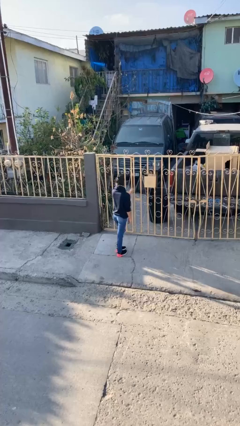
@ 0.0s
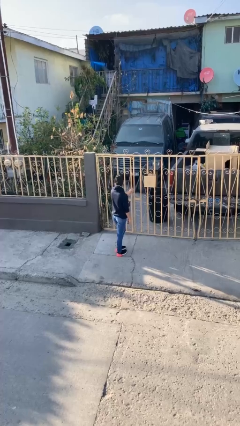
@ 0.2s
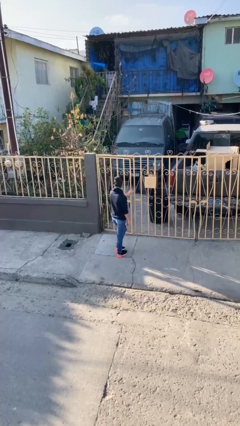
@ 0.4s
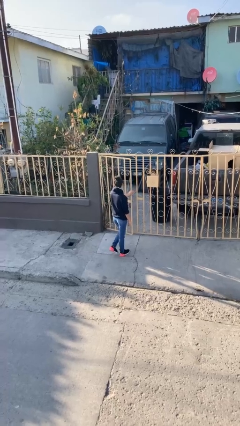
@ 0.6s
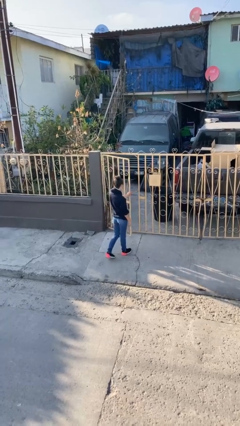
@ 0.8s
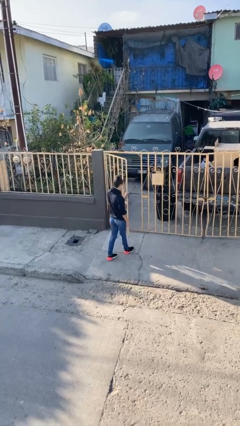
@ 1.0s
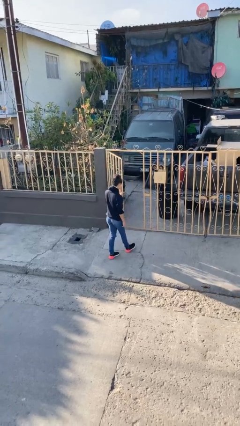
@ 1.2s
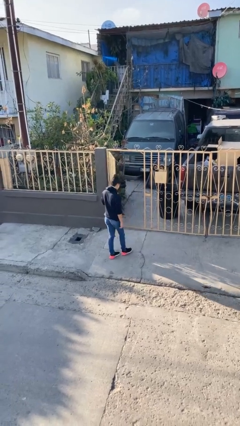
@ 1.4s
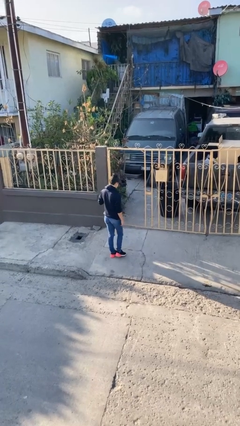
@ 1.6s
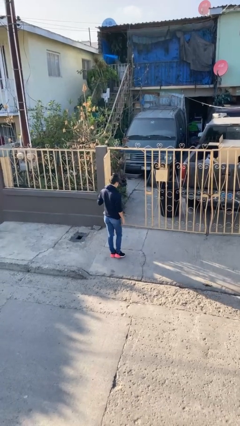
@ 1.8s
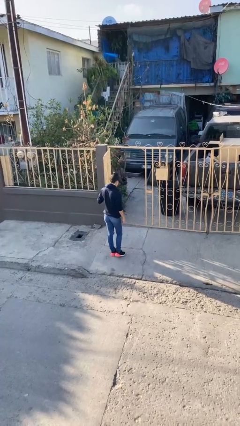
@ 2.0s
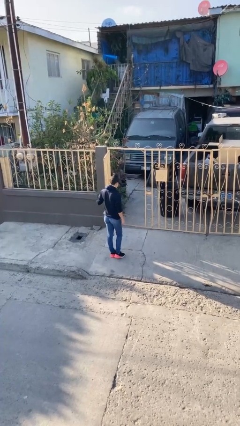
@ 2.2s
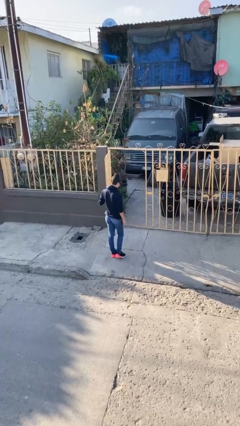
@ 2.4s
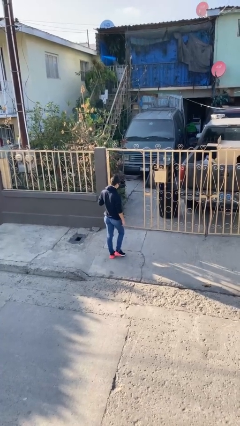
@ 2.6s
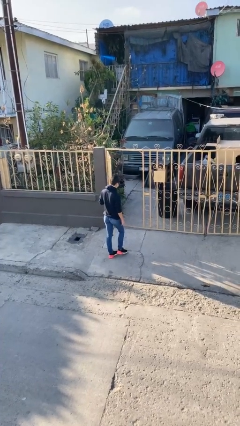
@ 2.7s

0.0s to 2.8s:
person opens facility door

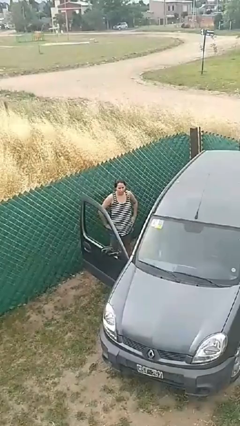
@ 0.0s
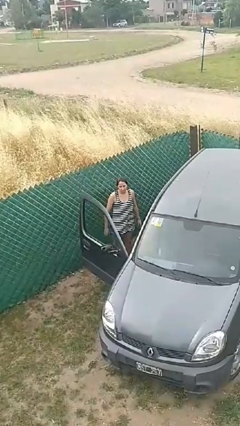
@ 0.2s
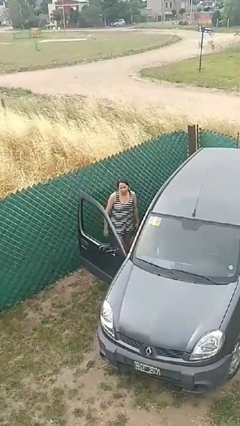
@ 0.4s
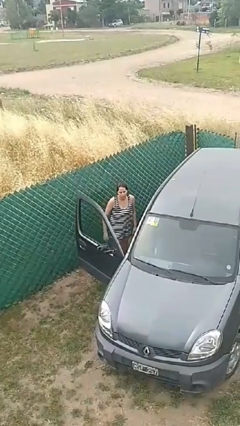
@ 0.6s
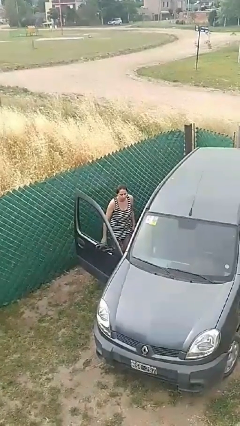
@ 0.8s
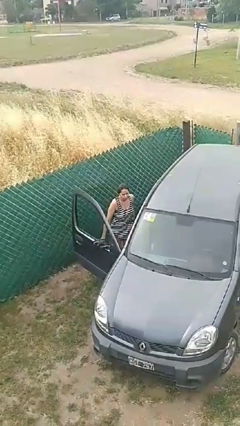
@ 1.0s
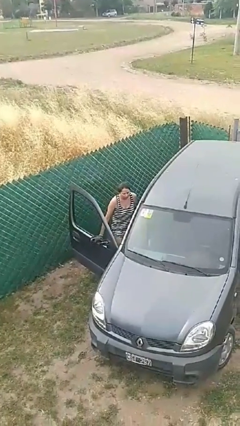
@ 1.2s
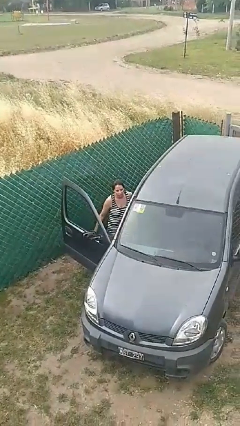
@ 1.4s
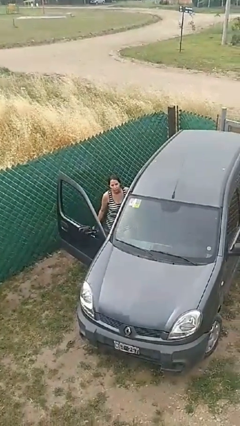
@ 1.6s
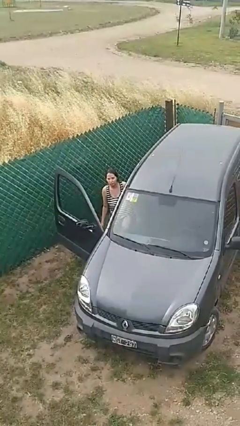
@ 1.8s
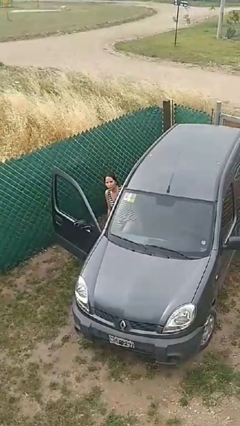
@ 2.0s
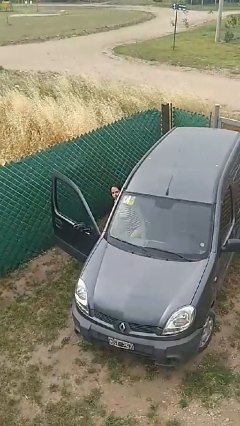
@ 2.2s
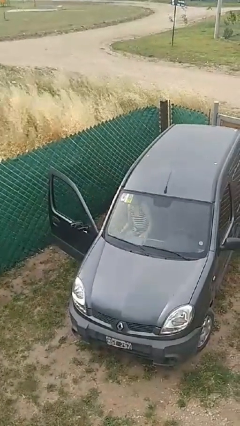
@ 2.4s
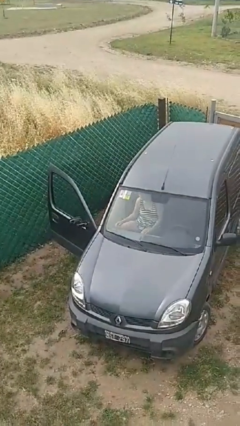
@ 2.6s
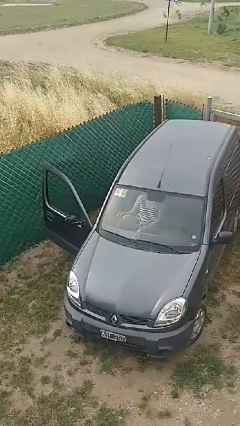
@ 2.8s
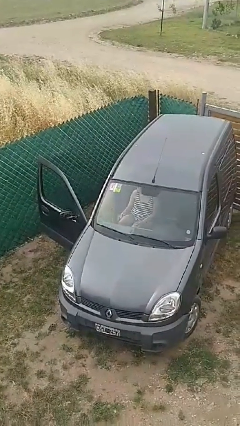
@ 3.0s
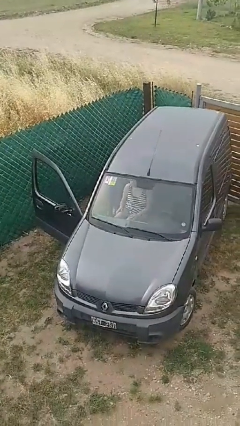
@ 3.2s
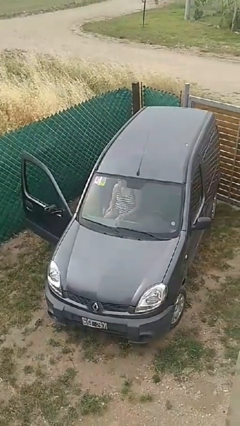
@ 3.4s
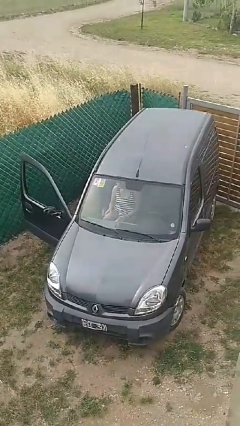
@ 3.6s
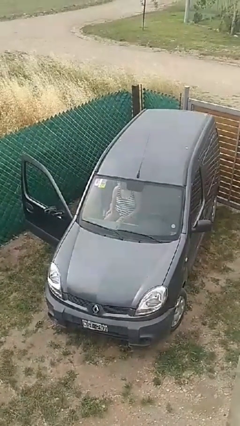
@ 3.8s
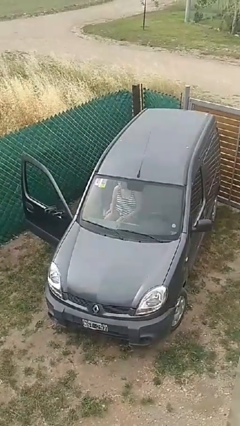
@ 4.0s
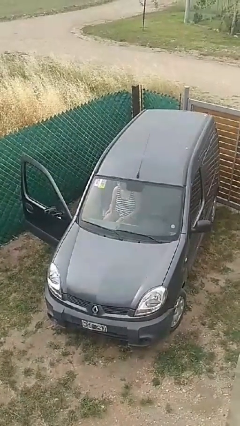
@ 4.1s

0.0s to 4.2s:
person enters car

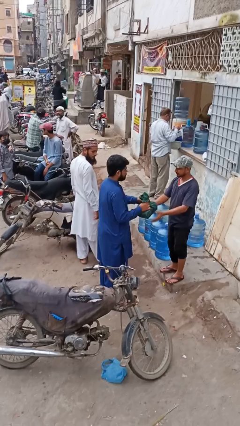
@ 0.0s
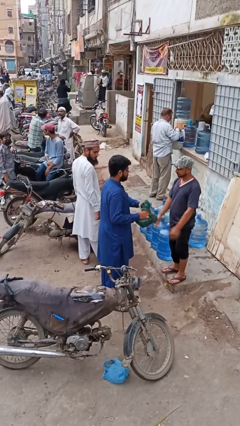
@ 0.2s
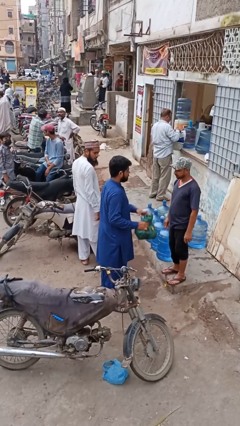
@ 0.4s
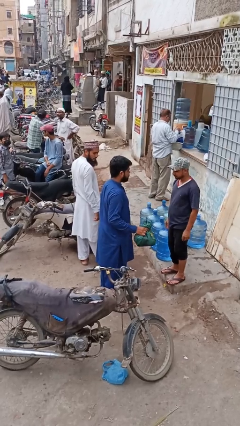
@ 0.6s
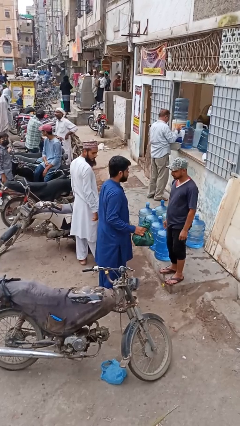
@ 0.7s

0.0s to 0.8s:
person transfers object to person

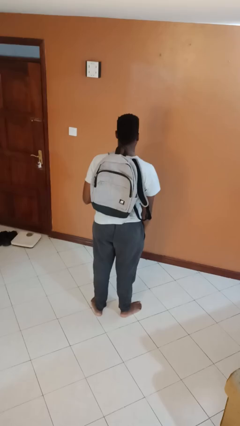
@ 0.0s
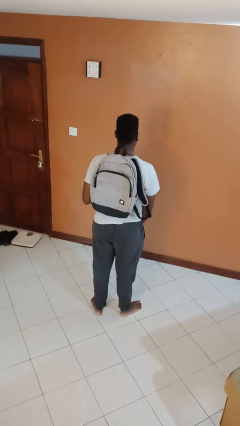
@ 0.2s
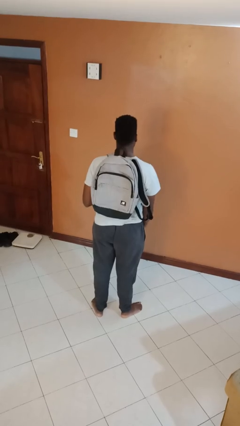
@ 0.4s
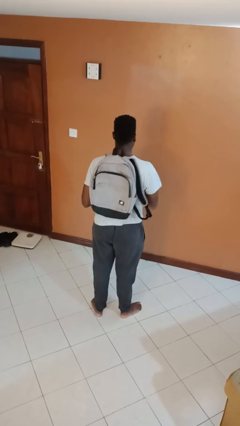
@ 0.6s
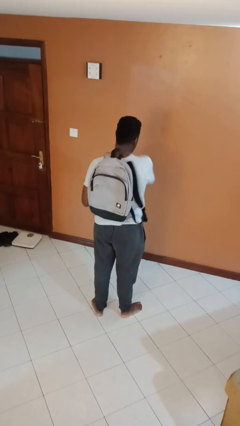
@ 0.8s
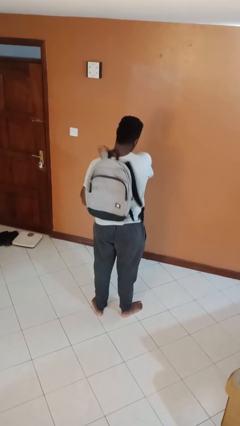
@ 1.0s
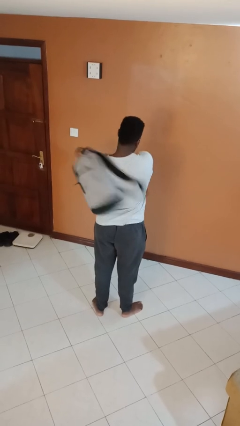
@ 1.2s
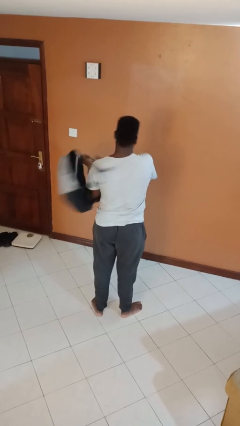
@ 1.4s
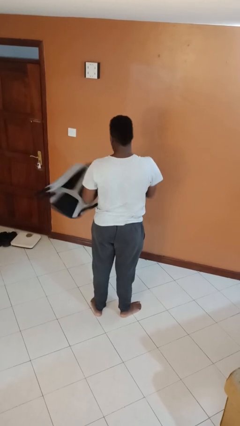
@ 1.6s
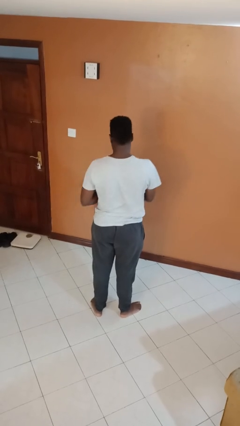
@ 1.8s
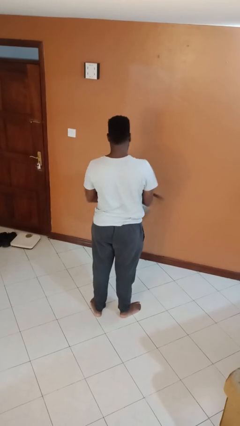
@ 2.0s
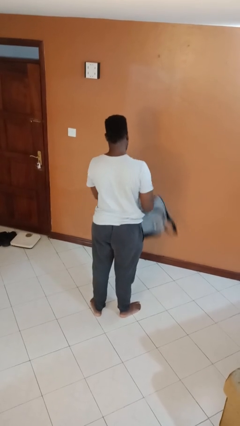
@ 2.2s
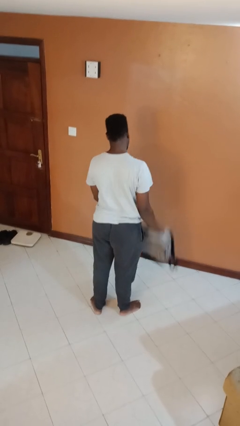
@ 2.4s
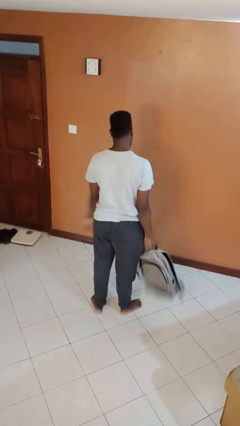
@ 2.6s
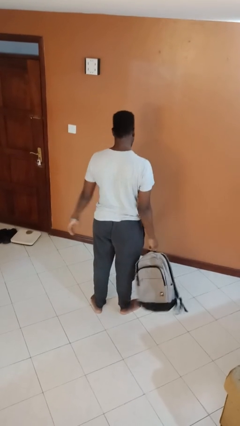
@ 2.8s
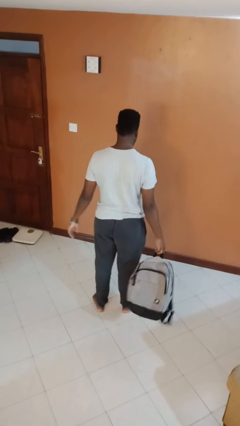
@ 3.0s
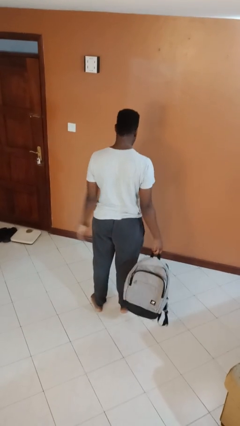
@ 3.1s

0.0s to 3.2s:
person takes off backpack

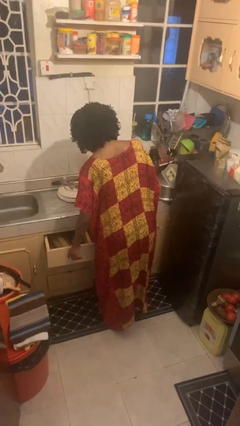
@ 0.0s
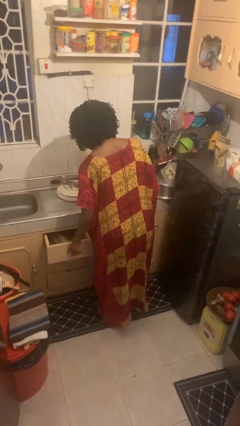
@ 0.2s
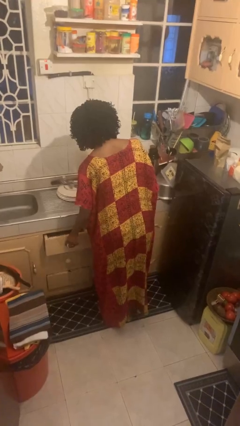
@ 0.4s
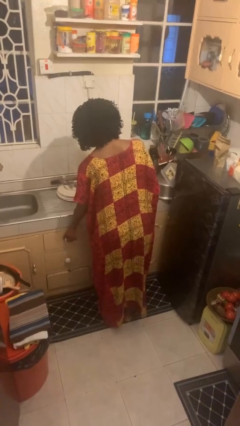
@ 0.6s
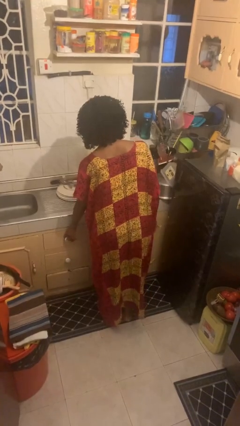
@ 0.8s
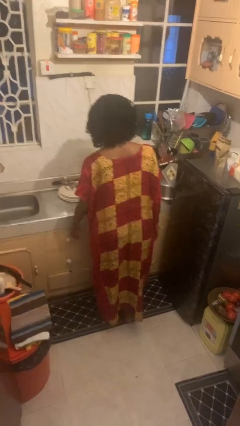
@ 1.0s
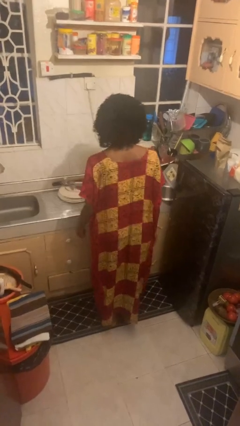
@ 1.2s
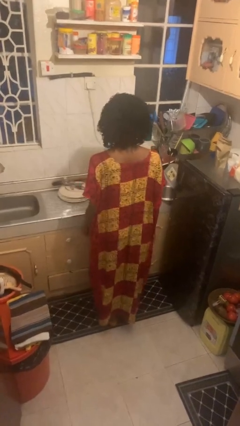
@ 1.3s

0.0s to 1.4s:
person closes kitchen drawer

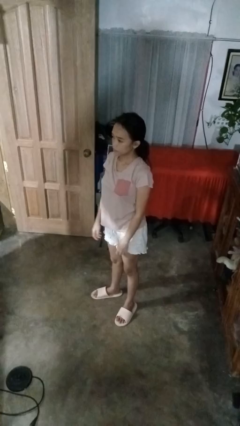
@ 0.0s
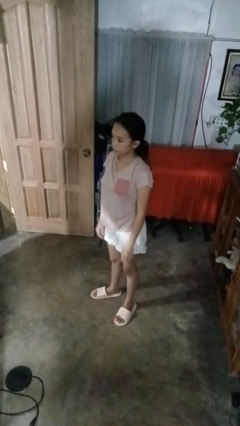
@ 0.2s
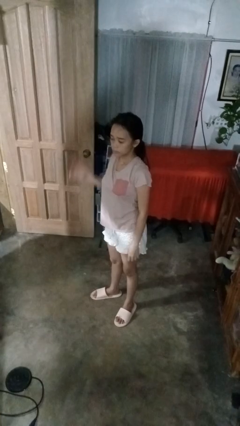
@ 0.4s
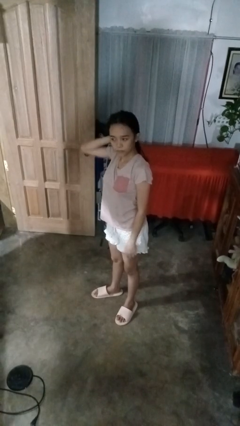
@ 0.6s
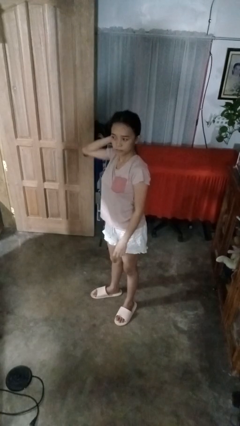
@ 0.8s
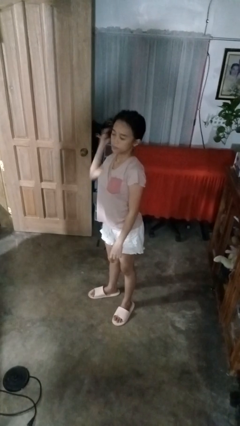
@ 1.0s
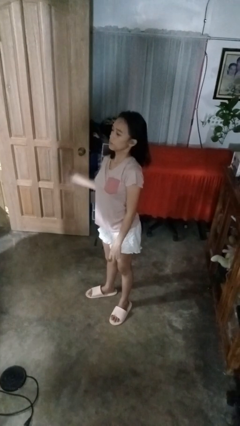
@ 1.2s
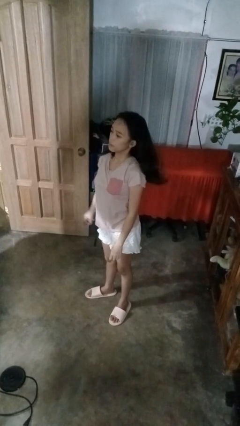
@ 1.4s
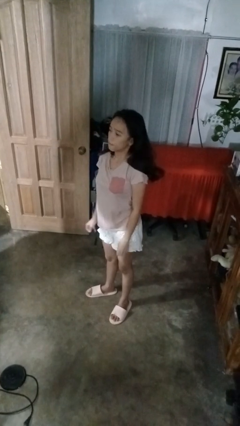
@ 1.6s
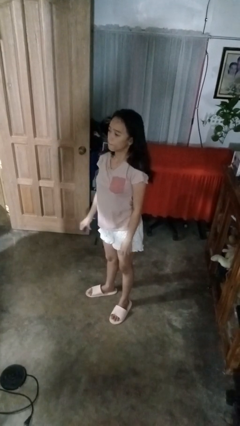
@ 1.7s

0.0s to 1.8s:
person takes off hairtie

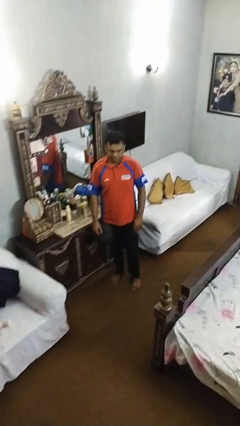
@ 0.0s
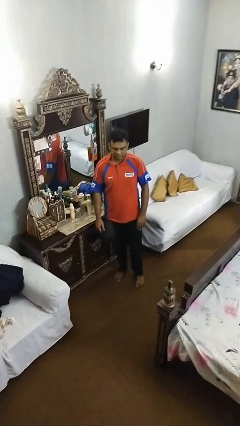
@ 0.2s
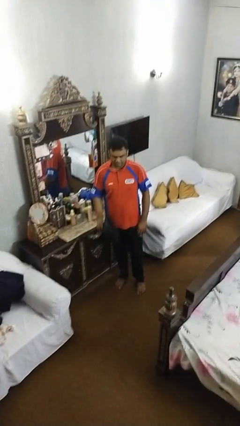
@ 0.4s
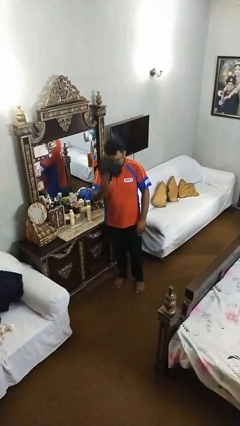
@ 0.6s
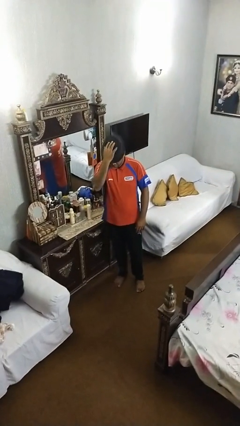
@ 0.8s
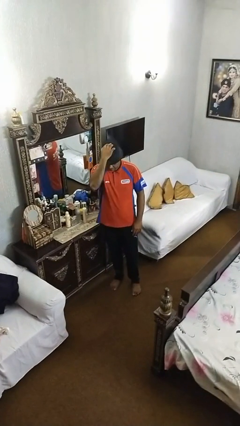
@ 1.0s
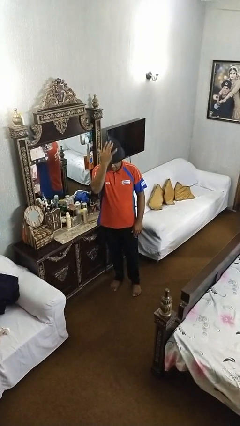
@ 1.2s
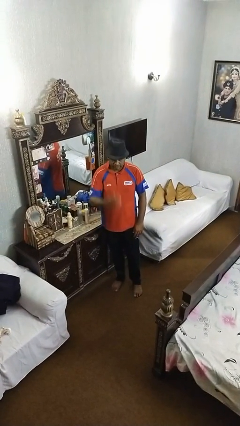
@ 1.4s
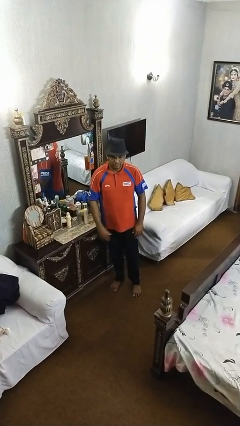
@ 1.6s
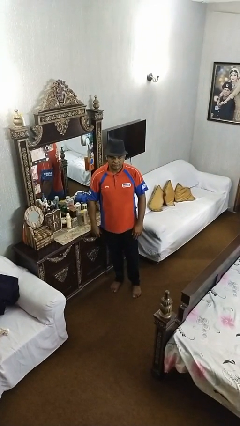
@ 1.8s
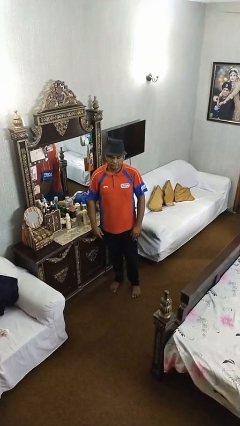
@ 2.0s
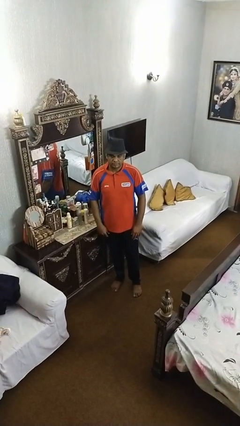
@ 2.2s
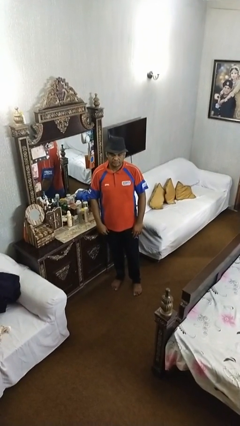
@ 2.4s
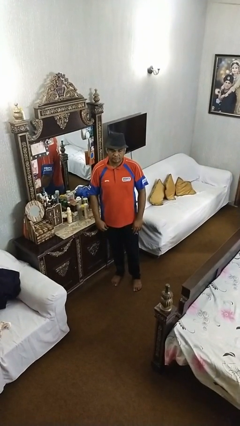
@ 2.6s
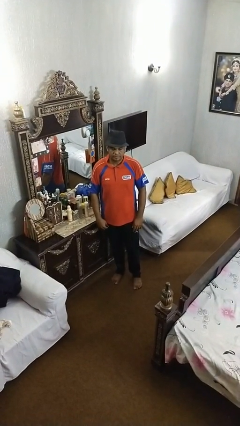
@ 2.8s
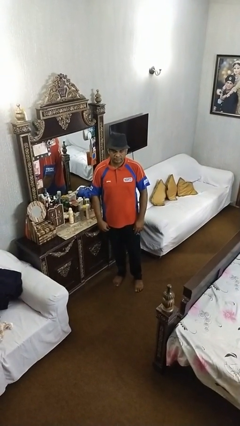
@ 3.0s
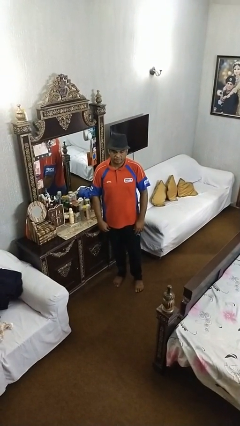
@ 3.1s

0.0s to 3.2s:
person puts on hat
